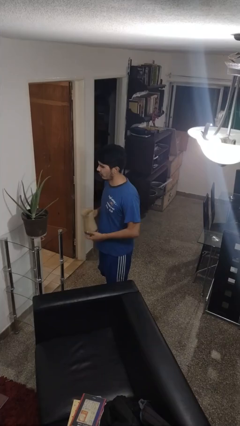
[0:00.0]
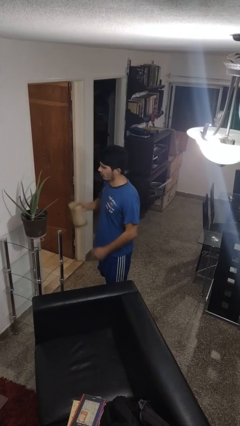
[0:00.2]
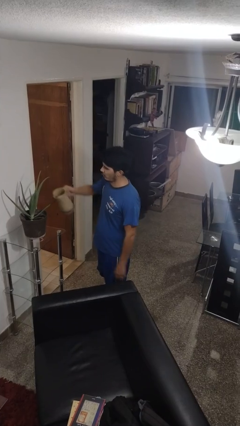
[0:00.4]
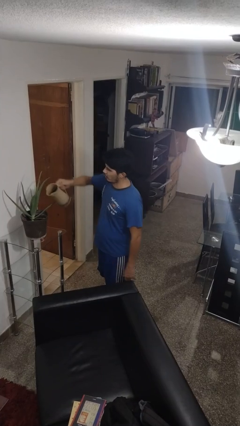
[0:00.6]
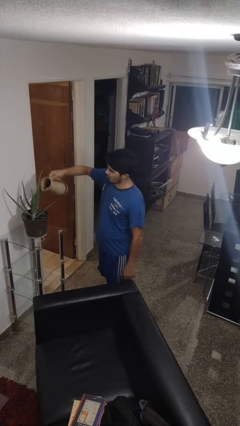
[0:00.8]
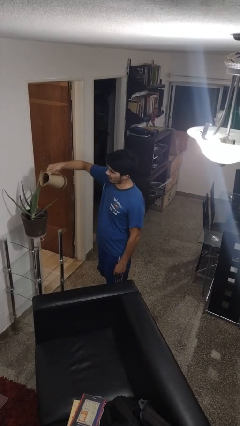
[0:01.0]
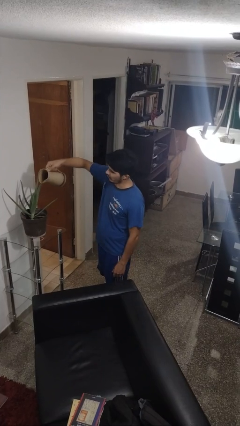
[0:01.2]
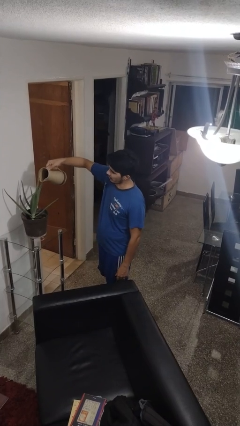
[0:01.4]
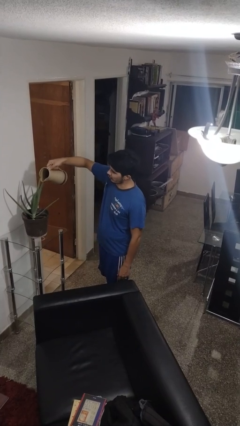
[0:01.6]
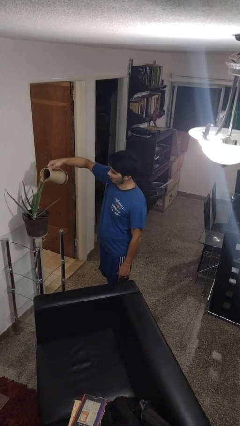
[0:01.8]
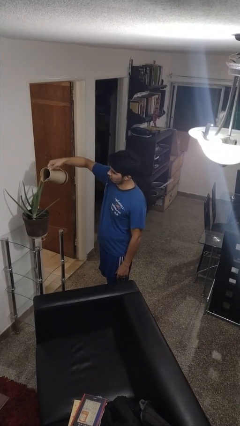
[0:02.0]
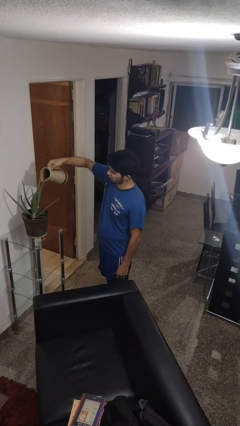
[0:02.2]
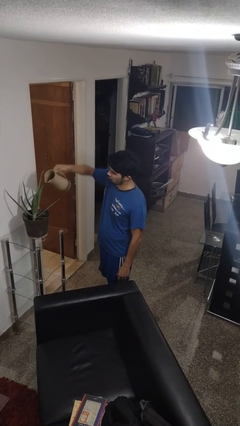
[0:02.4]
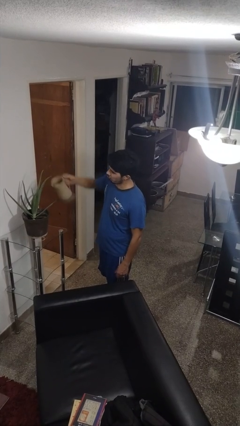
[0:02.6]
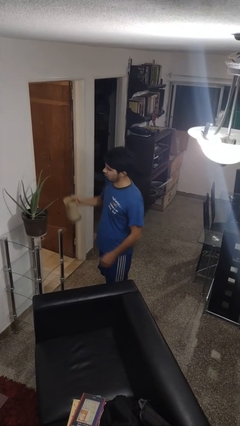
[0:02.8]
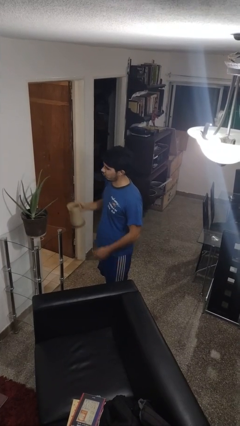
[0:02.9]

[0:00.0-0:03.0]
person waters houseplant

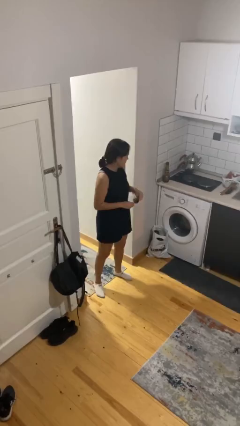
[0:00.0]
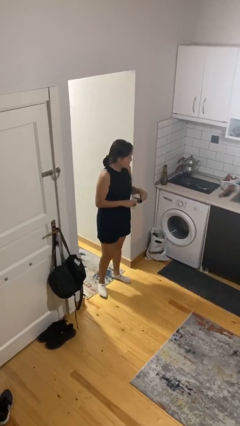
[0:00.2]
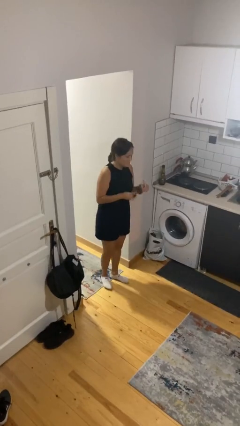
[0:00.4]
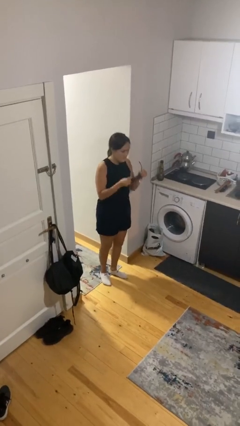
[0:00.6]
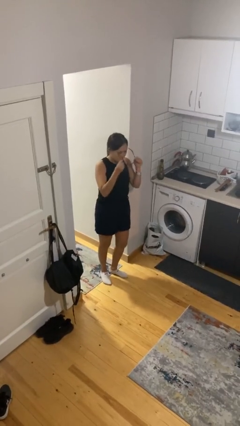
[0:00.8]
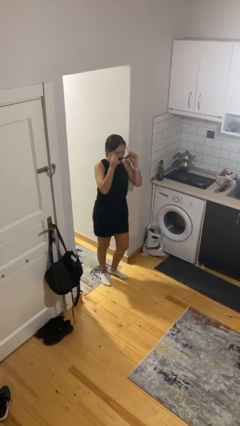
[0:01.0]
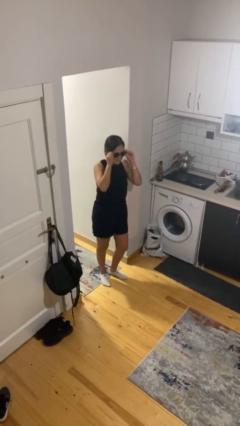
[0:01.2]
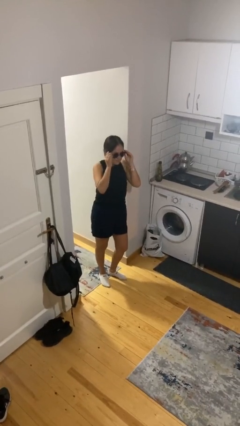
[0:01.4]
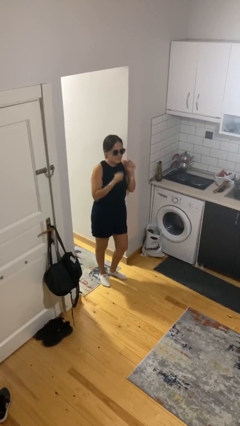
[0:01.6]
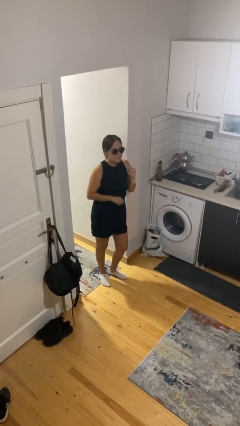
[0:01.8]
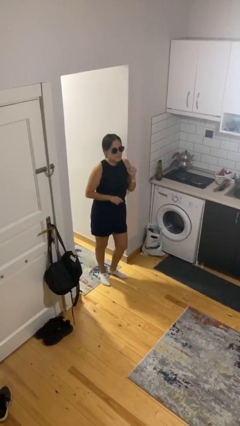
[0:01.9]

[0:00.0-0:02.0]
person puts on sunglasses

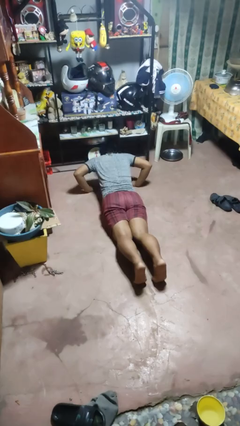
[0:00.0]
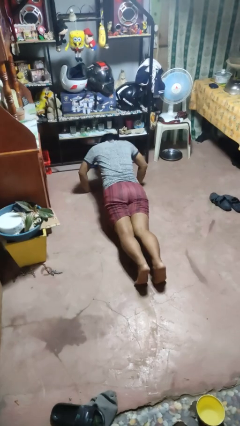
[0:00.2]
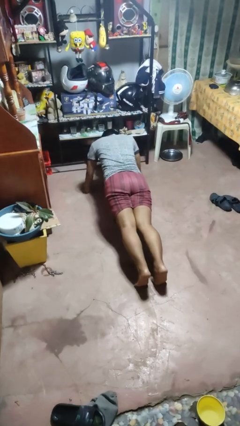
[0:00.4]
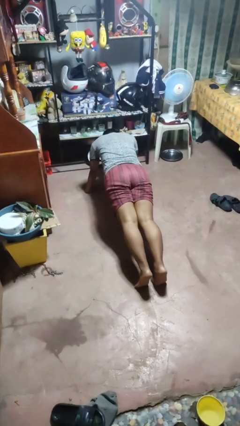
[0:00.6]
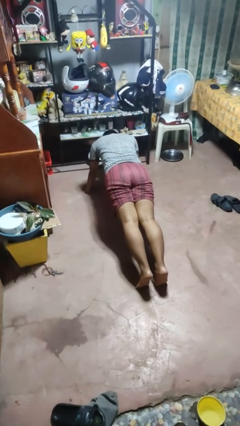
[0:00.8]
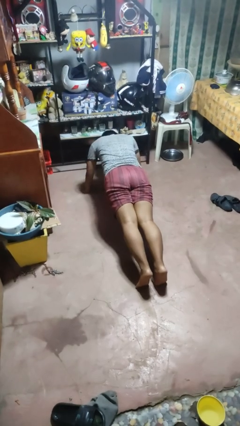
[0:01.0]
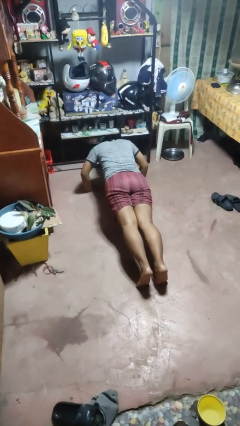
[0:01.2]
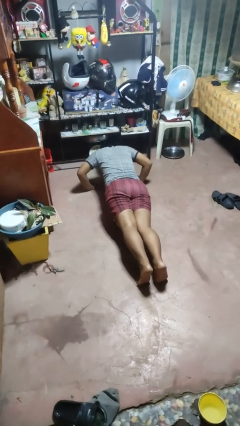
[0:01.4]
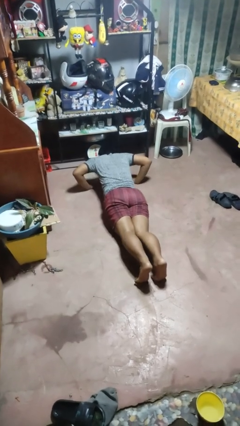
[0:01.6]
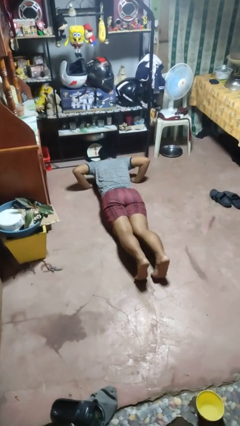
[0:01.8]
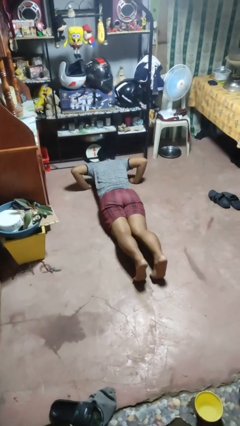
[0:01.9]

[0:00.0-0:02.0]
person exercises with pushup

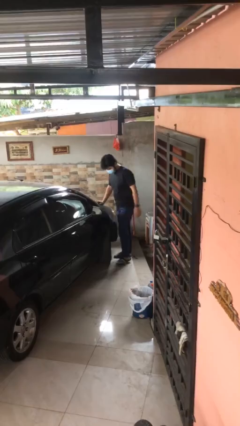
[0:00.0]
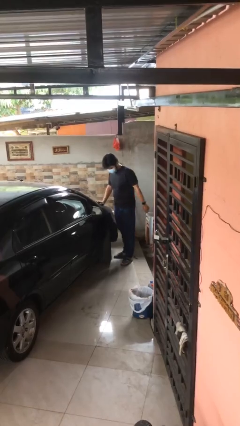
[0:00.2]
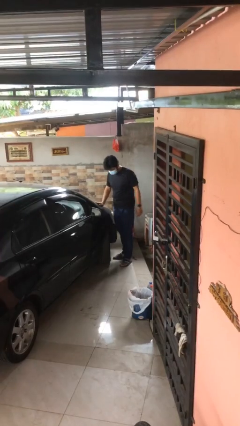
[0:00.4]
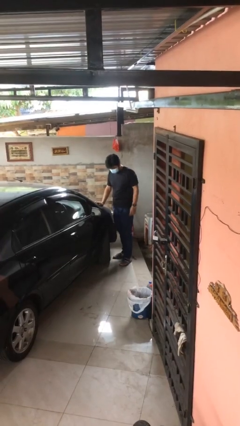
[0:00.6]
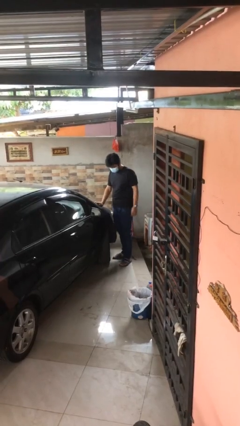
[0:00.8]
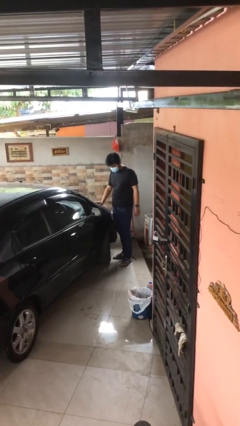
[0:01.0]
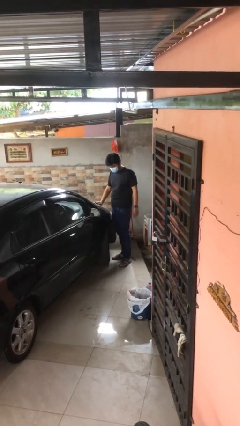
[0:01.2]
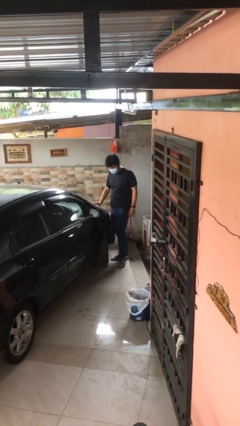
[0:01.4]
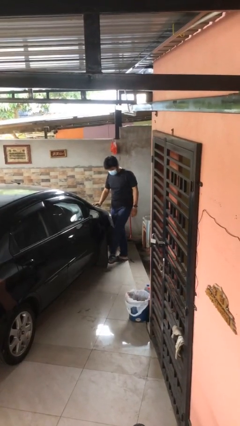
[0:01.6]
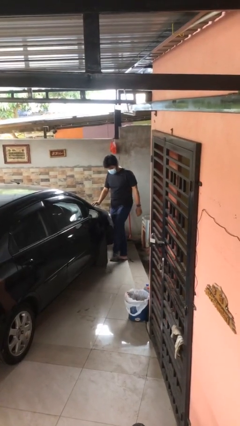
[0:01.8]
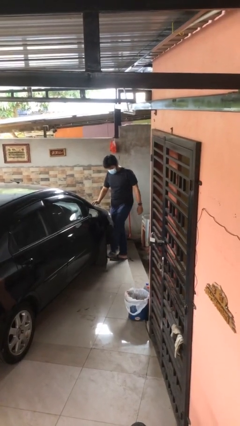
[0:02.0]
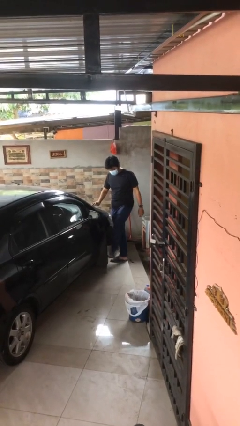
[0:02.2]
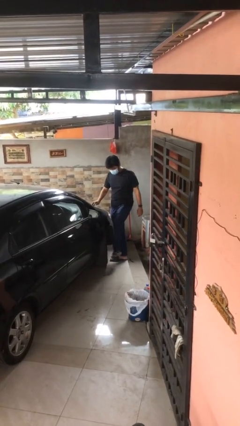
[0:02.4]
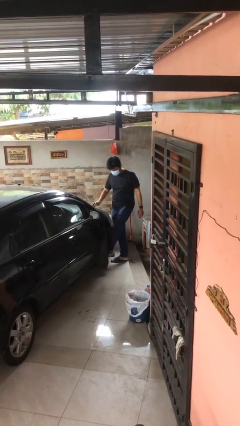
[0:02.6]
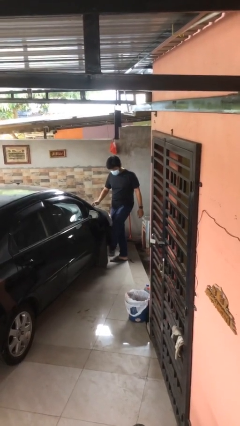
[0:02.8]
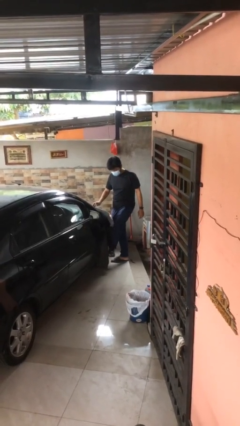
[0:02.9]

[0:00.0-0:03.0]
person kicks car tires

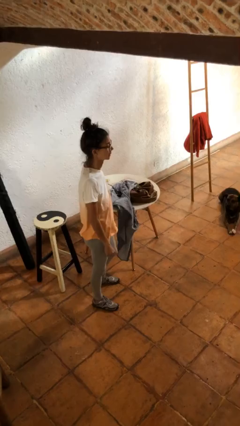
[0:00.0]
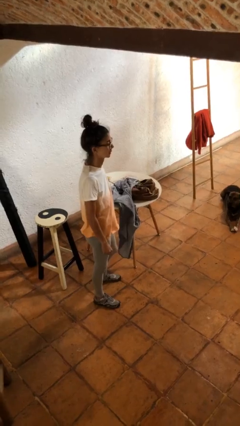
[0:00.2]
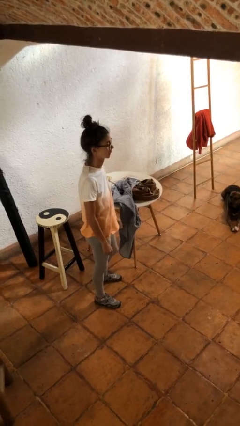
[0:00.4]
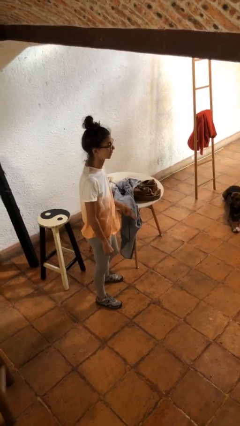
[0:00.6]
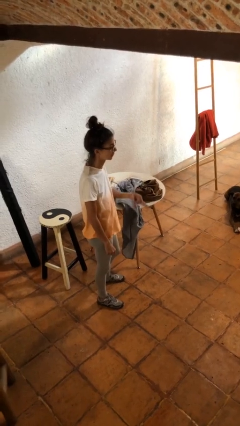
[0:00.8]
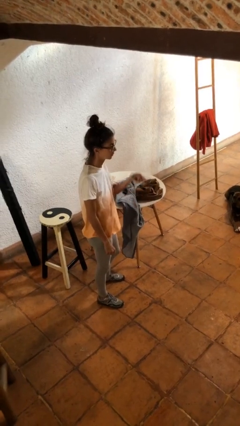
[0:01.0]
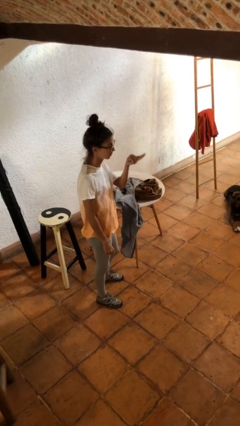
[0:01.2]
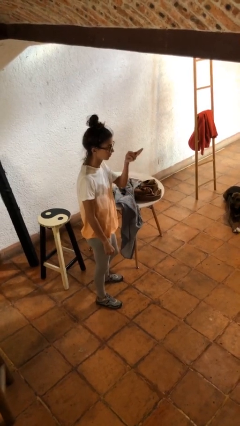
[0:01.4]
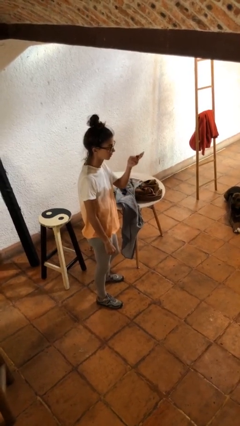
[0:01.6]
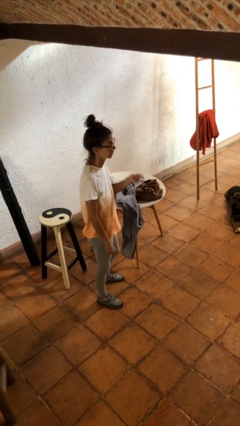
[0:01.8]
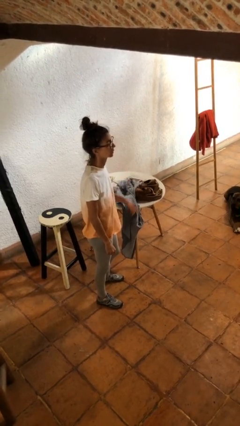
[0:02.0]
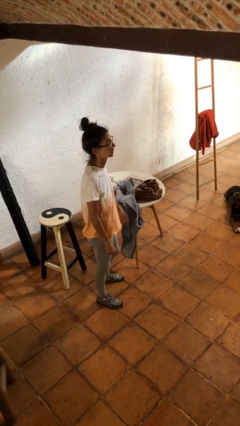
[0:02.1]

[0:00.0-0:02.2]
person gestures swipe up

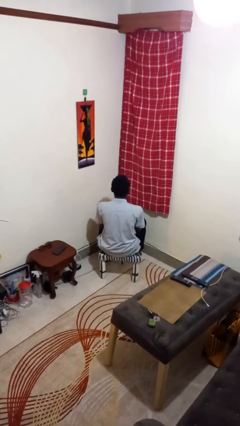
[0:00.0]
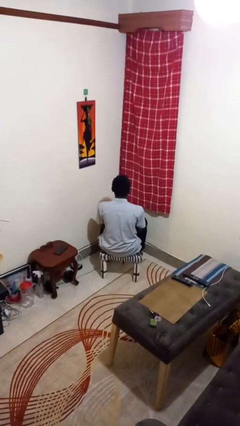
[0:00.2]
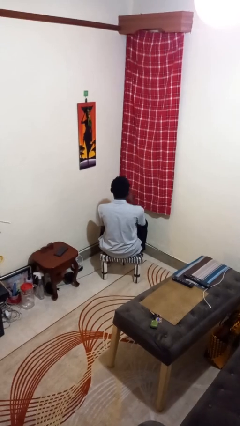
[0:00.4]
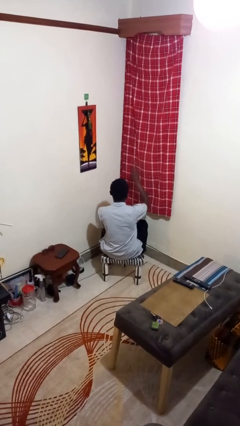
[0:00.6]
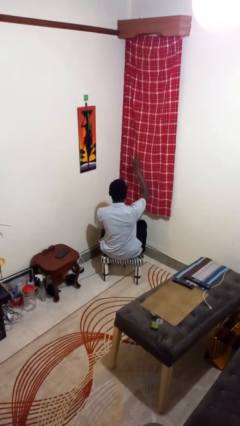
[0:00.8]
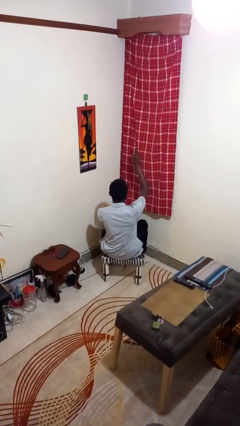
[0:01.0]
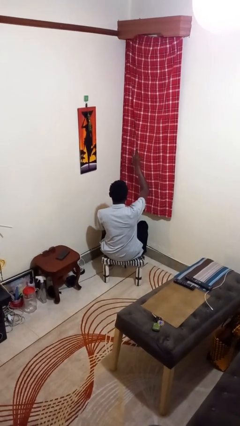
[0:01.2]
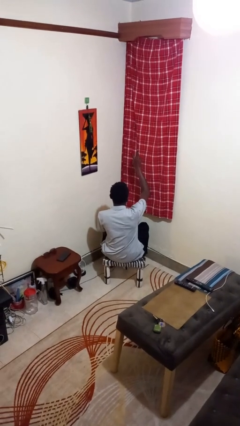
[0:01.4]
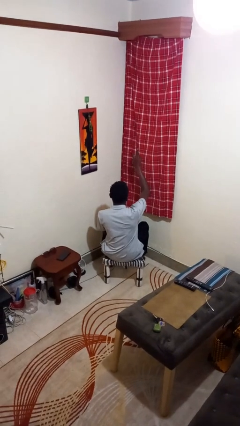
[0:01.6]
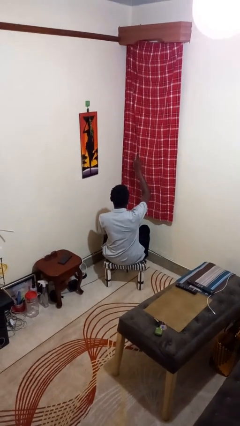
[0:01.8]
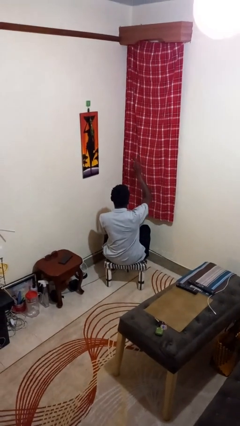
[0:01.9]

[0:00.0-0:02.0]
person gestures peace

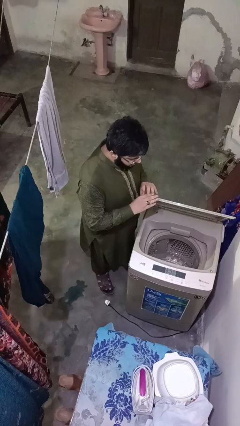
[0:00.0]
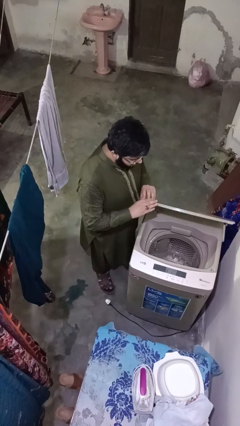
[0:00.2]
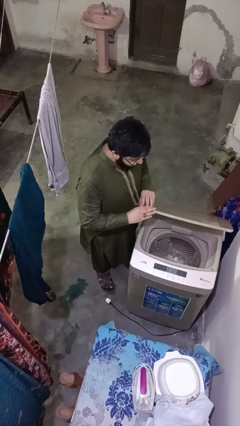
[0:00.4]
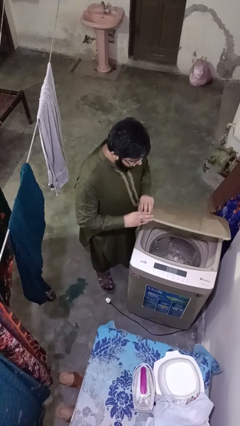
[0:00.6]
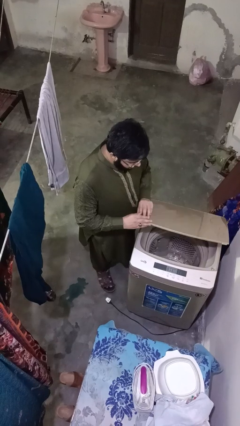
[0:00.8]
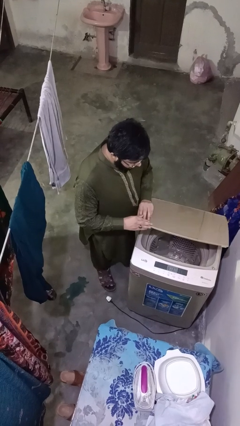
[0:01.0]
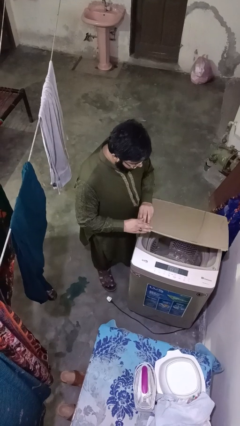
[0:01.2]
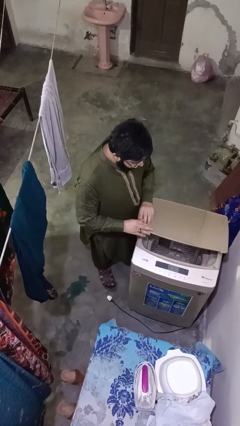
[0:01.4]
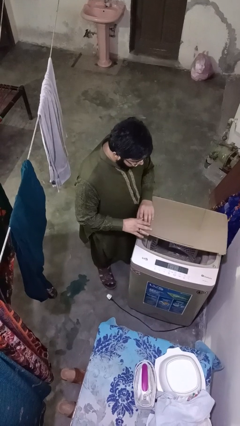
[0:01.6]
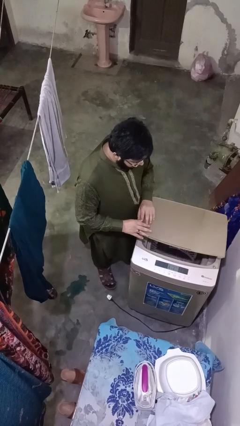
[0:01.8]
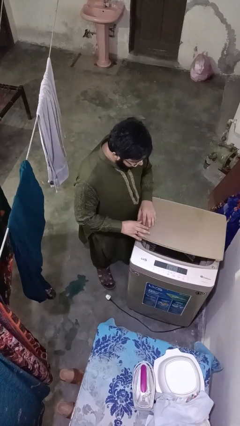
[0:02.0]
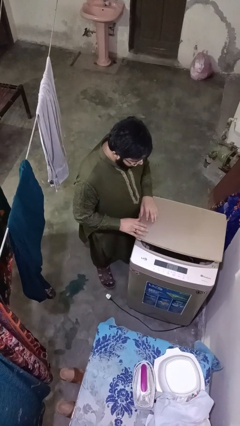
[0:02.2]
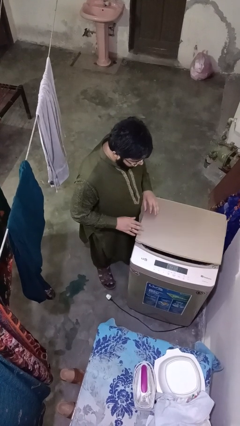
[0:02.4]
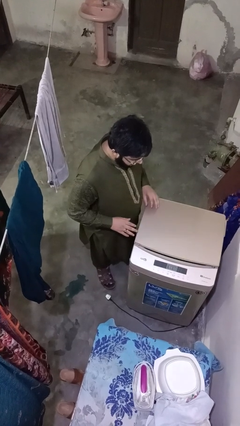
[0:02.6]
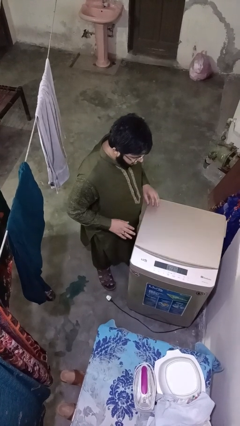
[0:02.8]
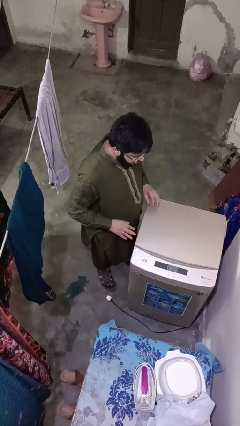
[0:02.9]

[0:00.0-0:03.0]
person closes clothes washer
